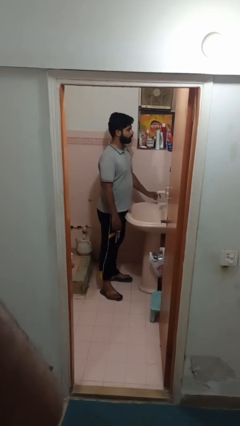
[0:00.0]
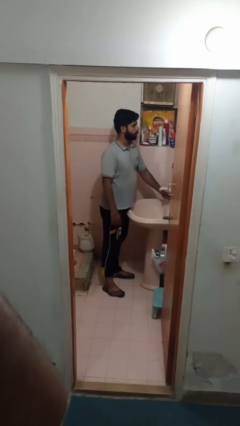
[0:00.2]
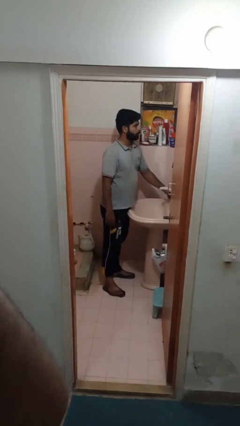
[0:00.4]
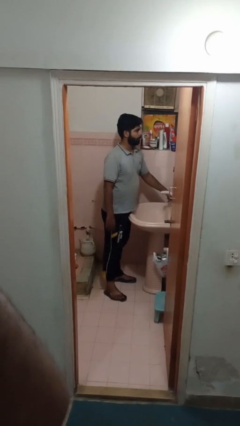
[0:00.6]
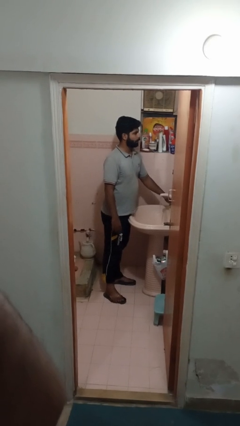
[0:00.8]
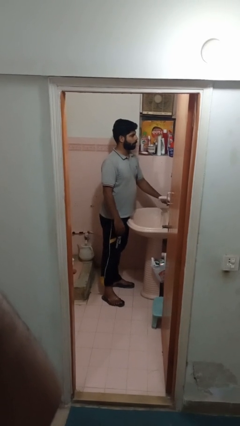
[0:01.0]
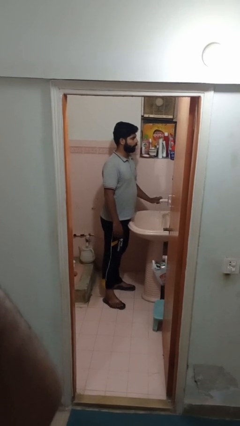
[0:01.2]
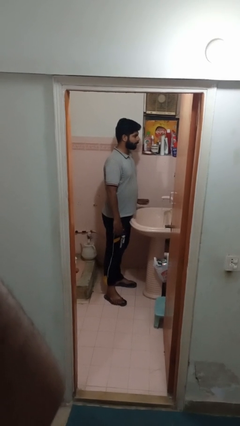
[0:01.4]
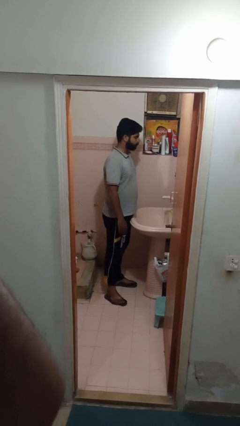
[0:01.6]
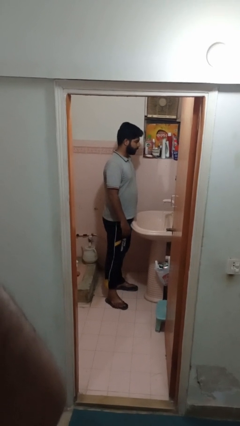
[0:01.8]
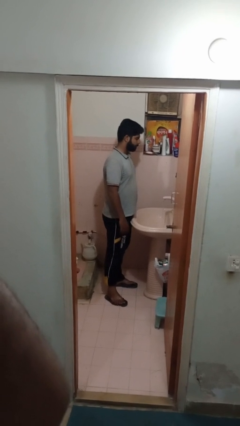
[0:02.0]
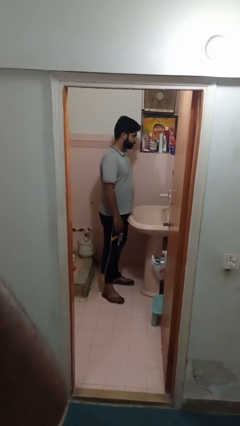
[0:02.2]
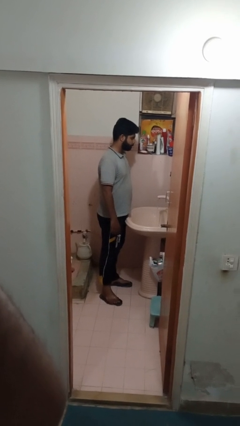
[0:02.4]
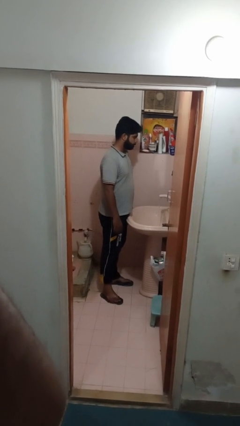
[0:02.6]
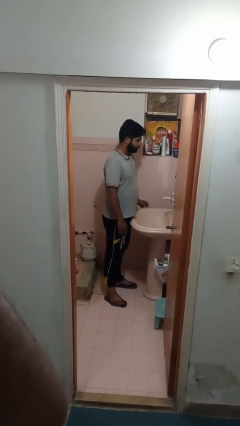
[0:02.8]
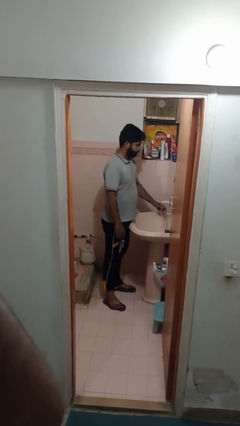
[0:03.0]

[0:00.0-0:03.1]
person turns on faucet

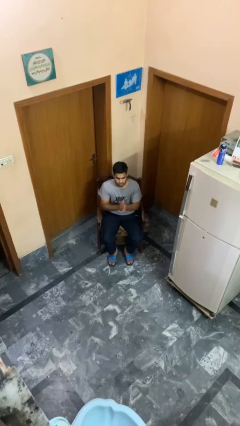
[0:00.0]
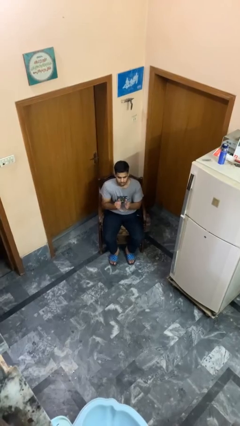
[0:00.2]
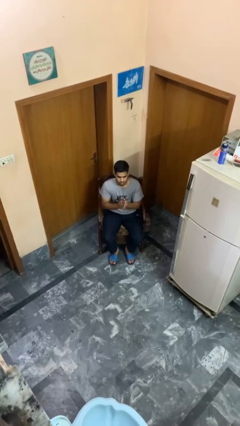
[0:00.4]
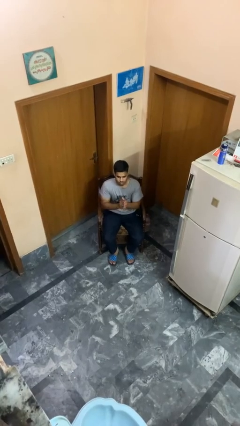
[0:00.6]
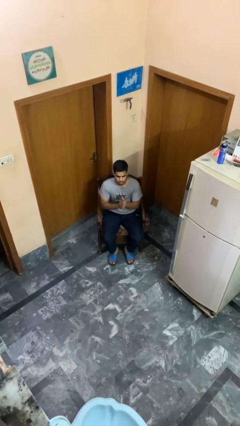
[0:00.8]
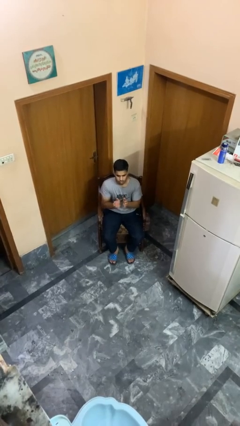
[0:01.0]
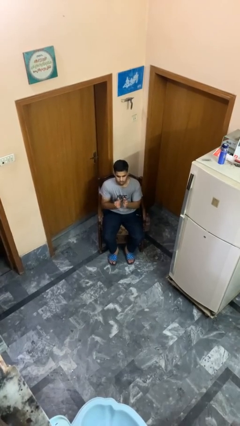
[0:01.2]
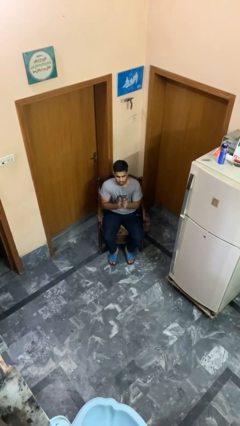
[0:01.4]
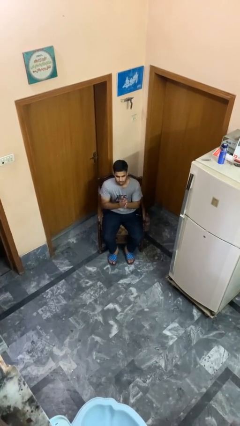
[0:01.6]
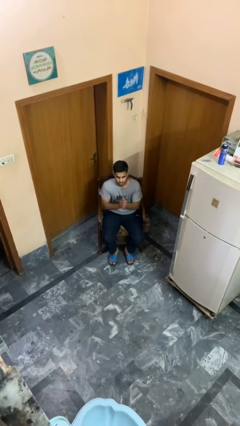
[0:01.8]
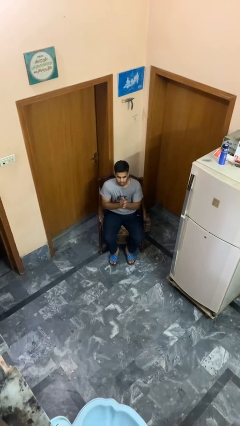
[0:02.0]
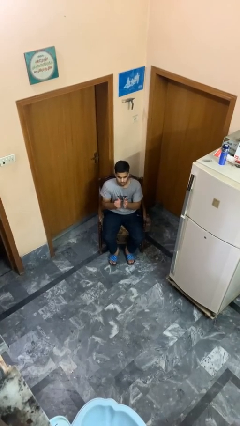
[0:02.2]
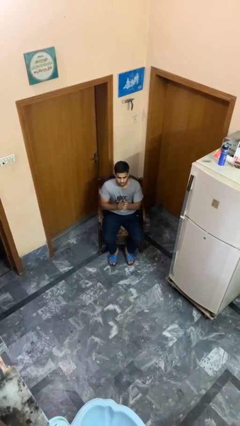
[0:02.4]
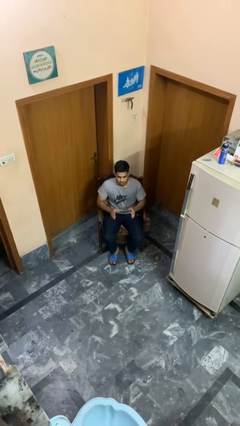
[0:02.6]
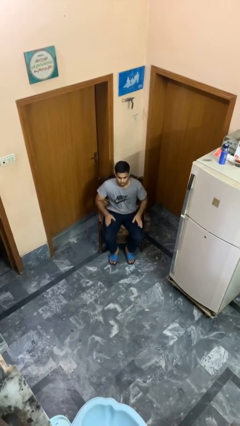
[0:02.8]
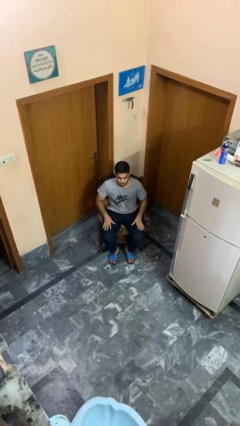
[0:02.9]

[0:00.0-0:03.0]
person claps hands

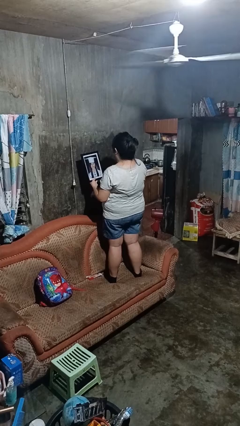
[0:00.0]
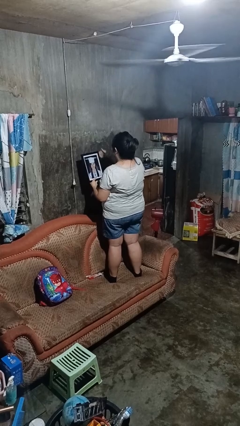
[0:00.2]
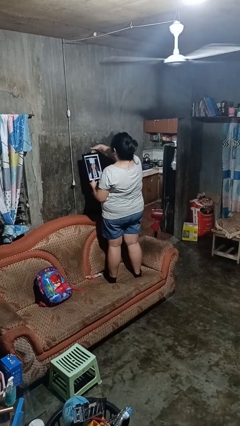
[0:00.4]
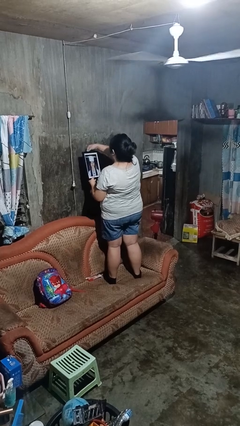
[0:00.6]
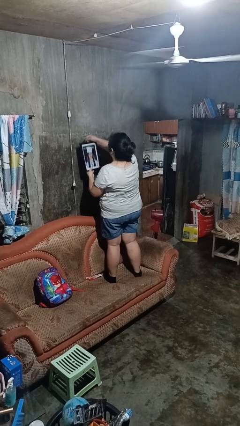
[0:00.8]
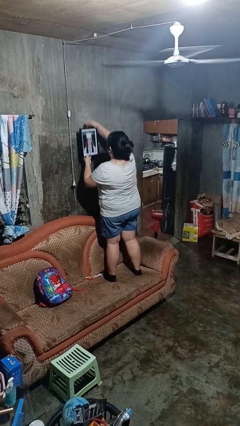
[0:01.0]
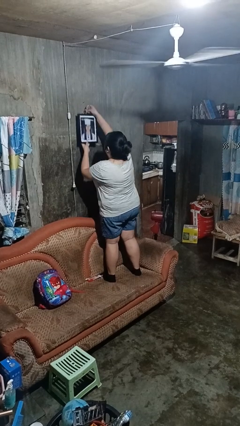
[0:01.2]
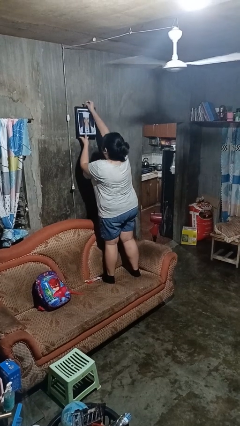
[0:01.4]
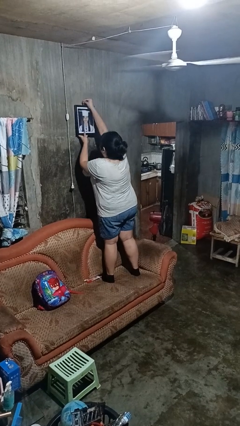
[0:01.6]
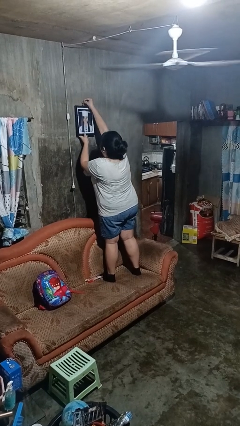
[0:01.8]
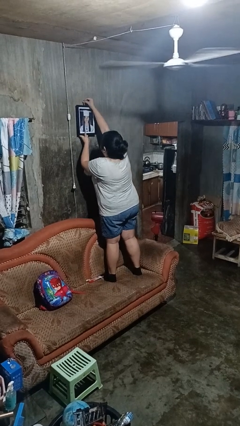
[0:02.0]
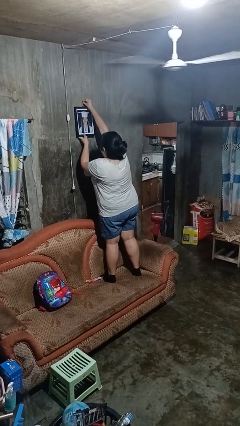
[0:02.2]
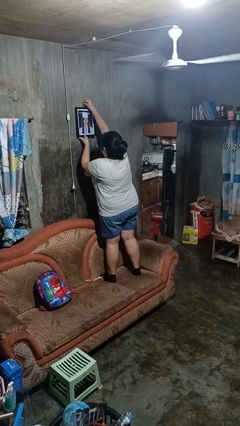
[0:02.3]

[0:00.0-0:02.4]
person puts up picture frame

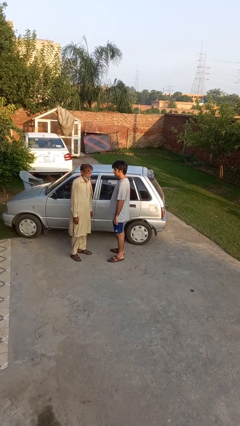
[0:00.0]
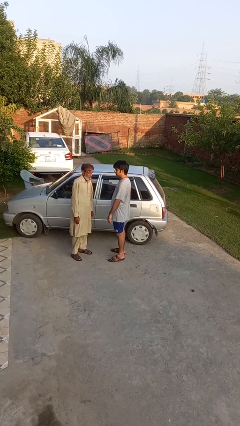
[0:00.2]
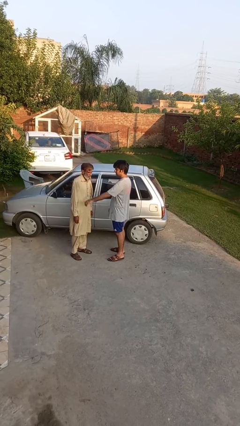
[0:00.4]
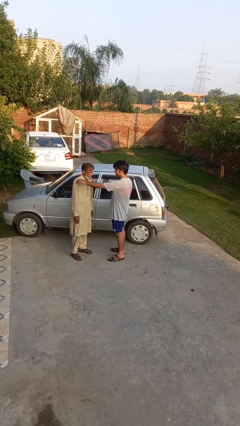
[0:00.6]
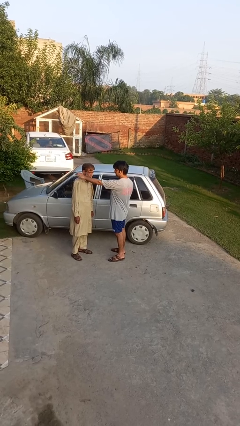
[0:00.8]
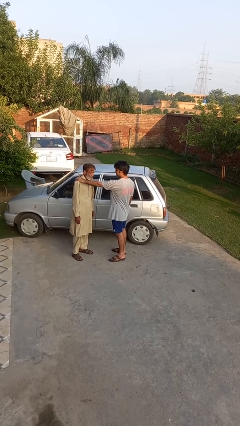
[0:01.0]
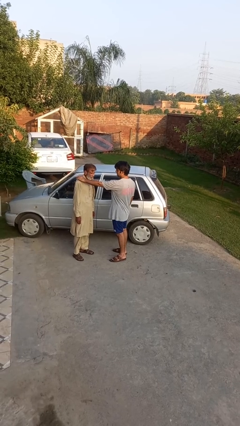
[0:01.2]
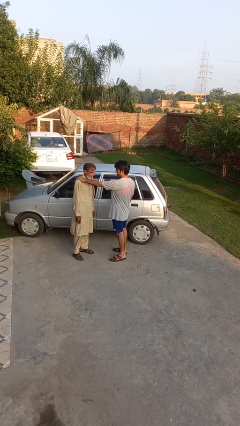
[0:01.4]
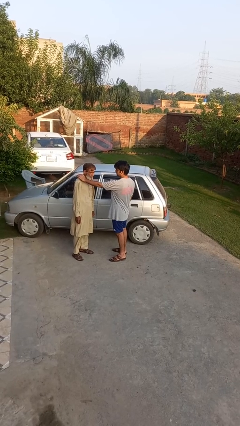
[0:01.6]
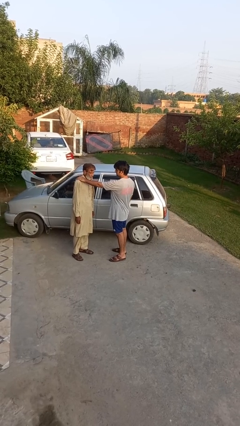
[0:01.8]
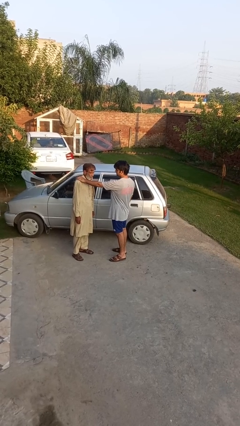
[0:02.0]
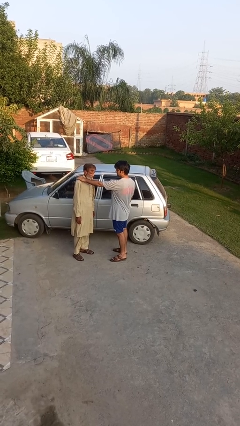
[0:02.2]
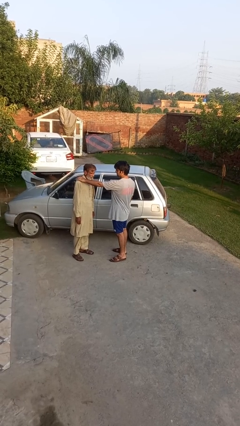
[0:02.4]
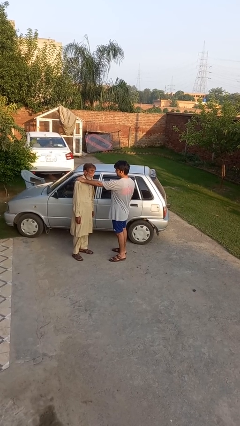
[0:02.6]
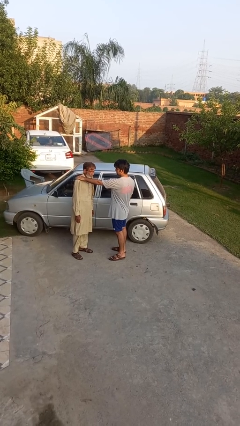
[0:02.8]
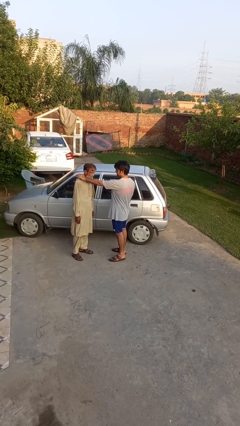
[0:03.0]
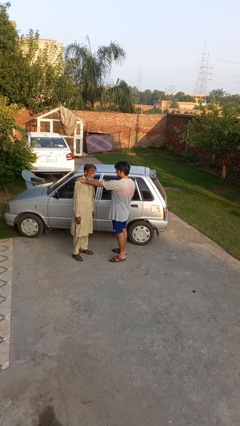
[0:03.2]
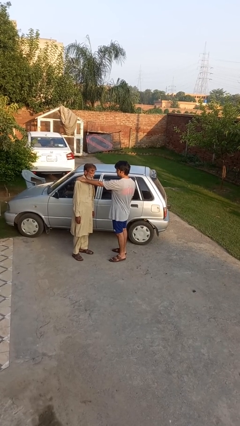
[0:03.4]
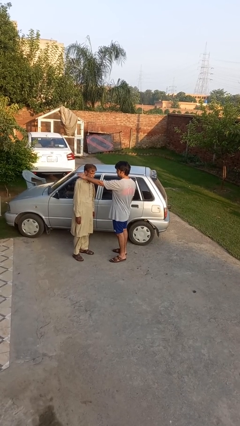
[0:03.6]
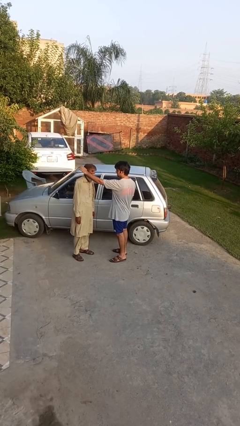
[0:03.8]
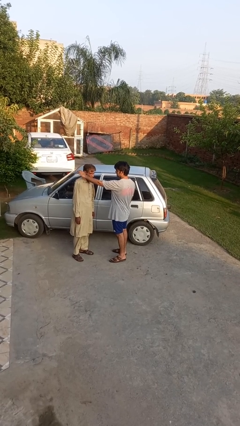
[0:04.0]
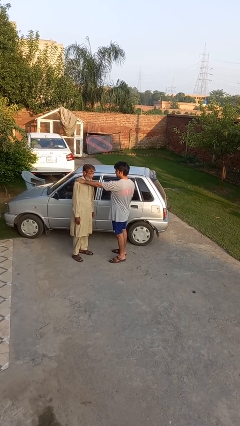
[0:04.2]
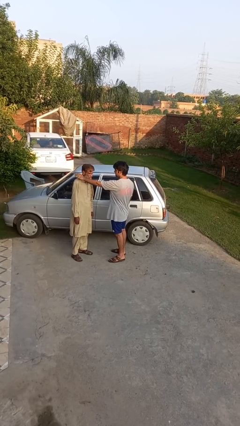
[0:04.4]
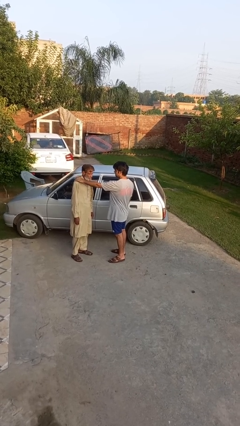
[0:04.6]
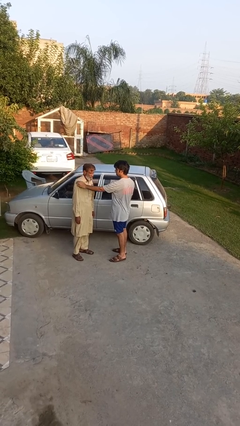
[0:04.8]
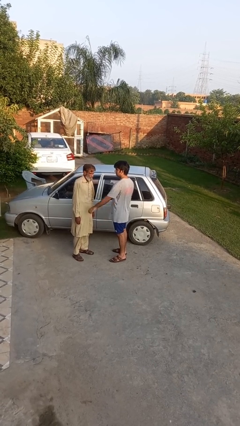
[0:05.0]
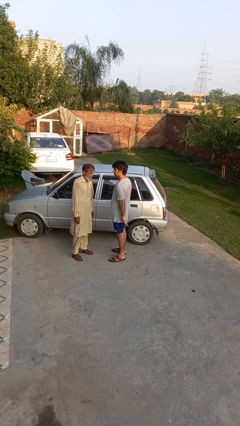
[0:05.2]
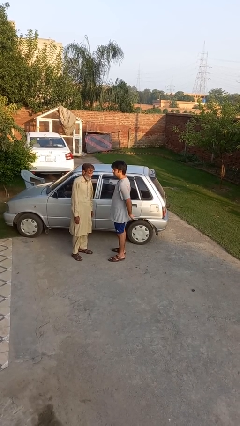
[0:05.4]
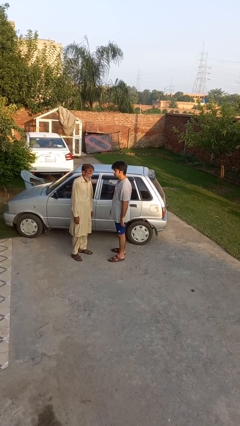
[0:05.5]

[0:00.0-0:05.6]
person pounds shoulders of person

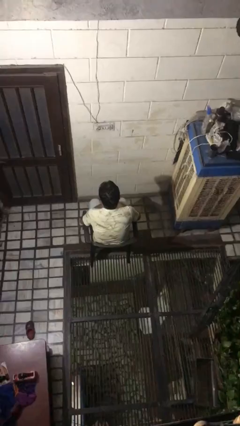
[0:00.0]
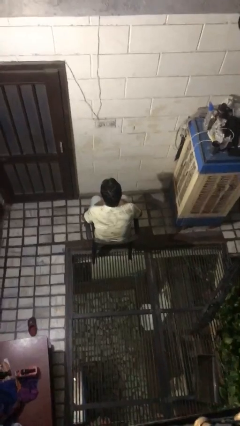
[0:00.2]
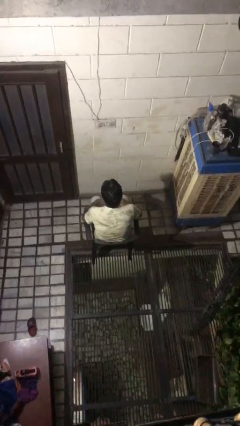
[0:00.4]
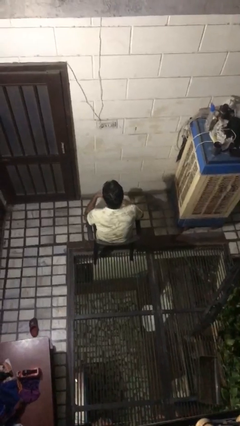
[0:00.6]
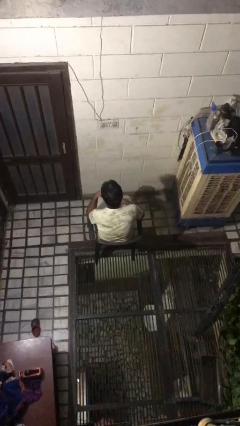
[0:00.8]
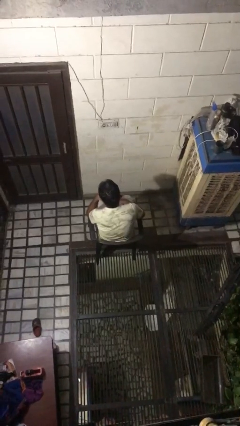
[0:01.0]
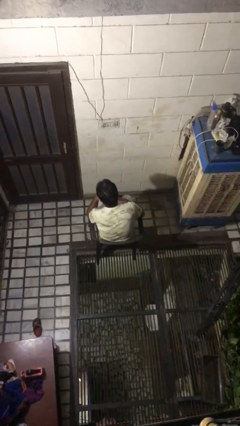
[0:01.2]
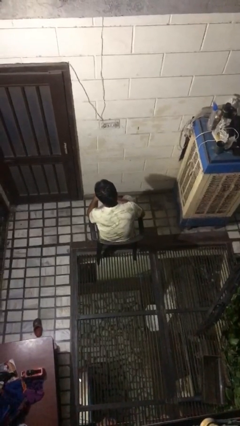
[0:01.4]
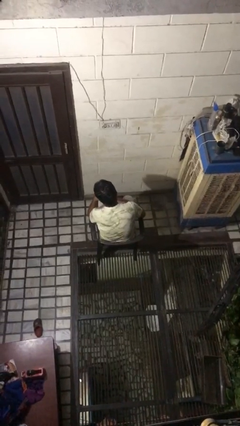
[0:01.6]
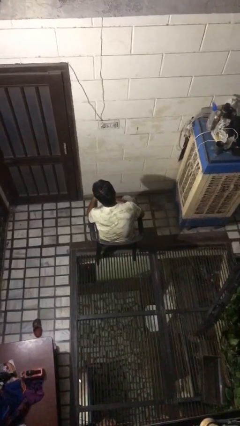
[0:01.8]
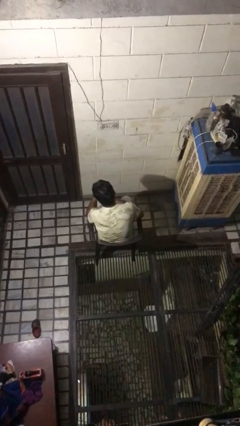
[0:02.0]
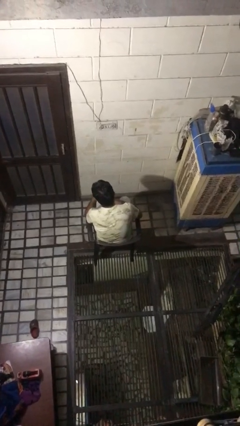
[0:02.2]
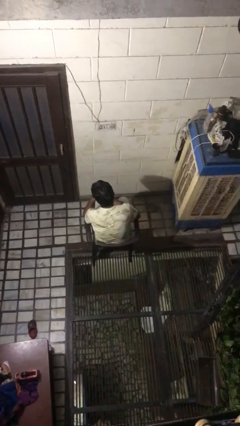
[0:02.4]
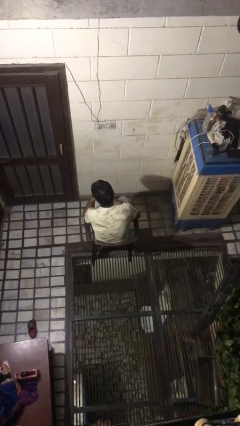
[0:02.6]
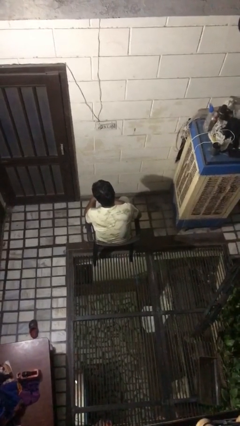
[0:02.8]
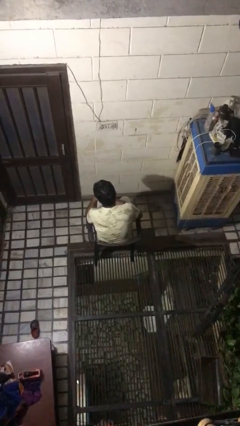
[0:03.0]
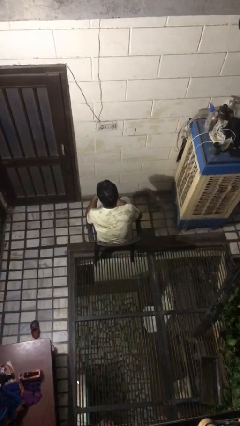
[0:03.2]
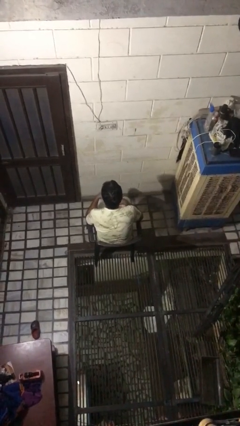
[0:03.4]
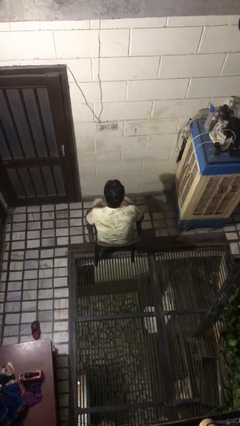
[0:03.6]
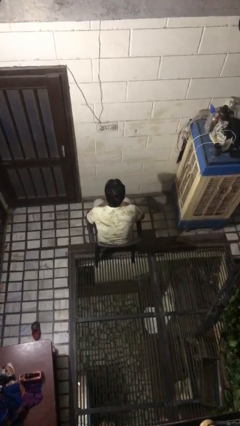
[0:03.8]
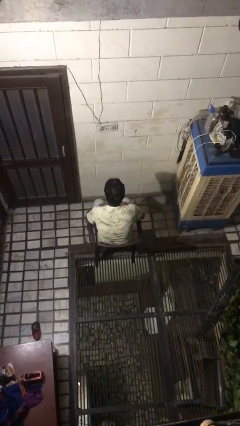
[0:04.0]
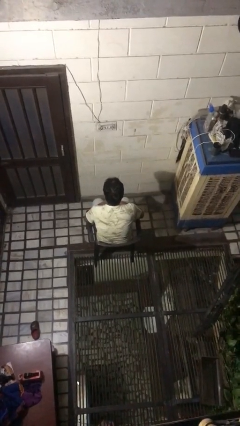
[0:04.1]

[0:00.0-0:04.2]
person strokes chin
